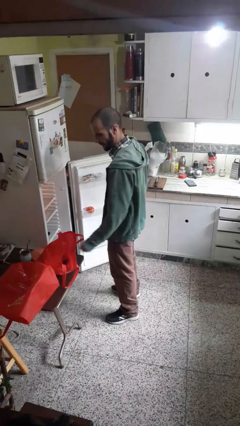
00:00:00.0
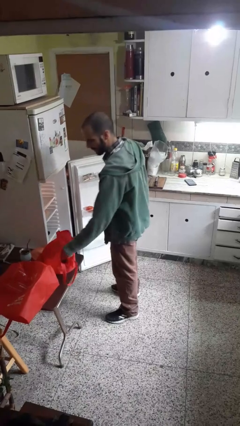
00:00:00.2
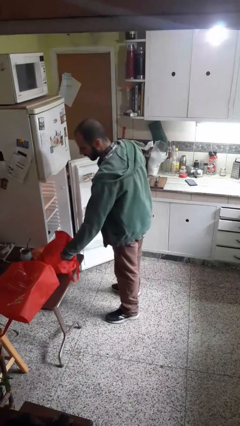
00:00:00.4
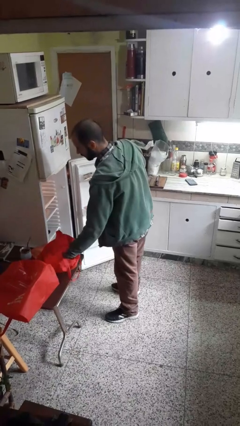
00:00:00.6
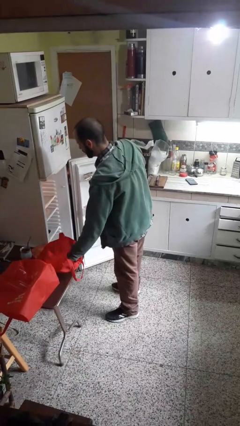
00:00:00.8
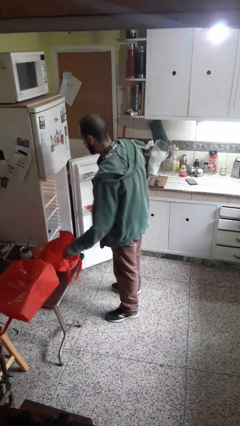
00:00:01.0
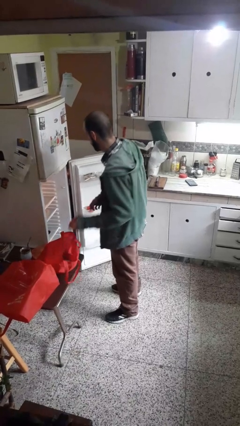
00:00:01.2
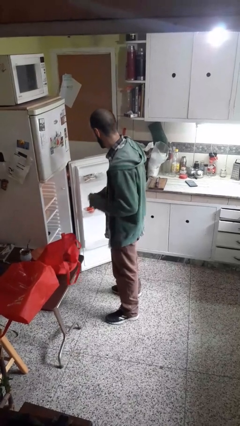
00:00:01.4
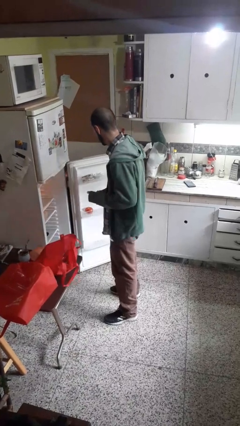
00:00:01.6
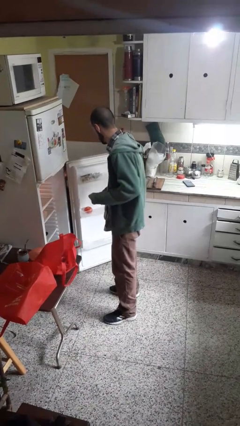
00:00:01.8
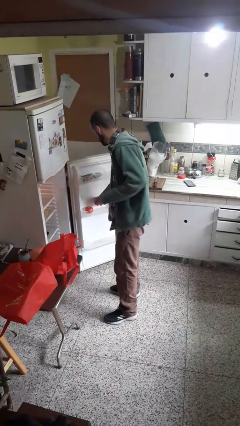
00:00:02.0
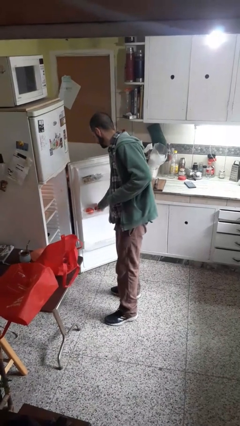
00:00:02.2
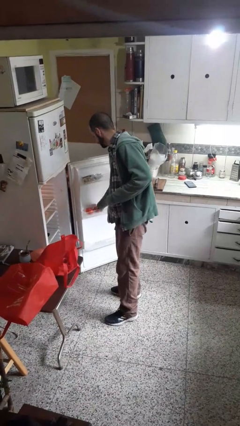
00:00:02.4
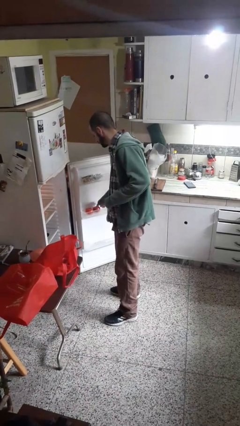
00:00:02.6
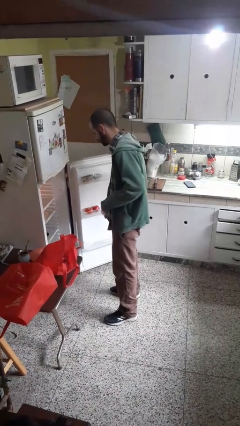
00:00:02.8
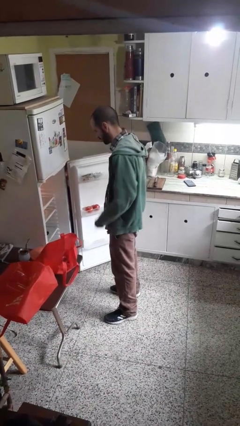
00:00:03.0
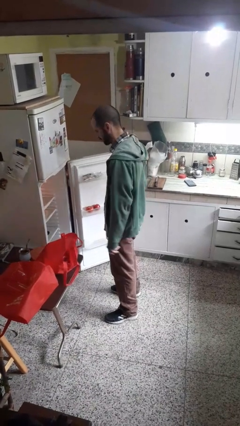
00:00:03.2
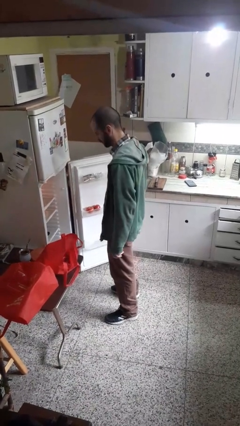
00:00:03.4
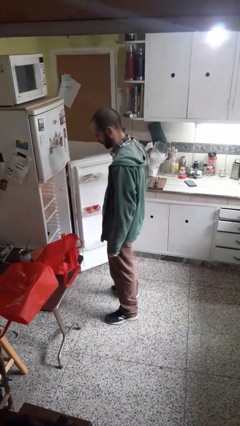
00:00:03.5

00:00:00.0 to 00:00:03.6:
person loads groceries into refrigerator

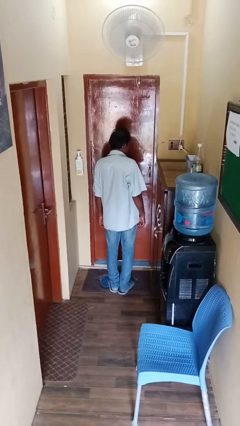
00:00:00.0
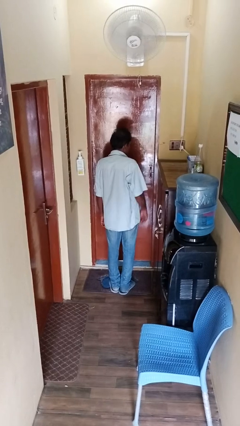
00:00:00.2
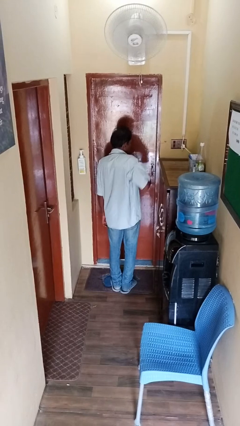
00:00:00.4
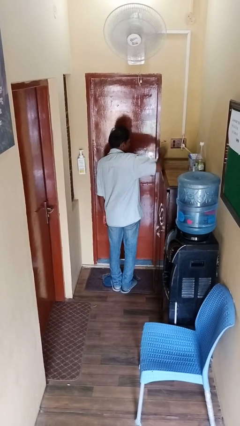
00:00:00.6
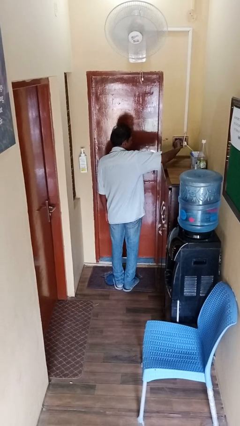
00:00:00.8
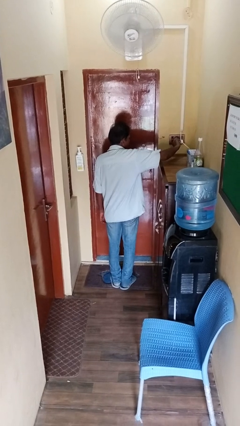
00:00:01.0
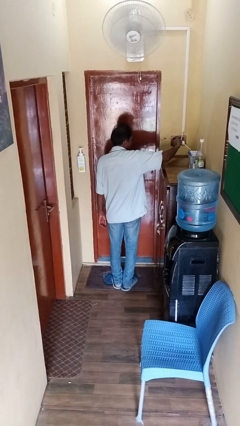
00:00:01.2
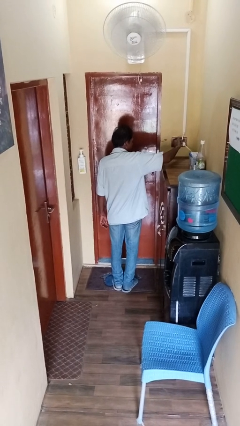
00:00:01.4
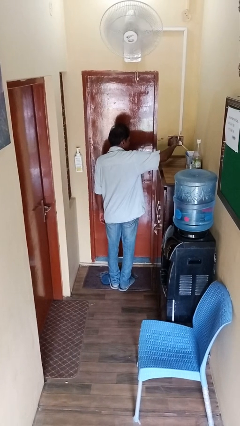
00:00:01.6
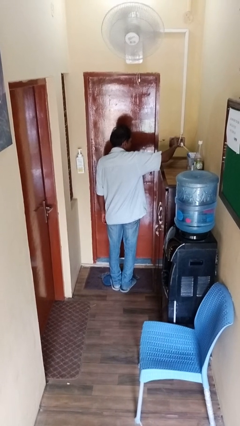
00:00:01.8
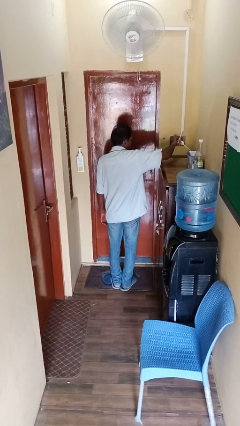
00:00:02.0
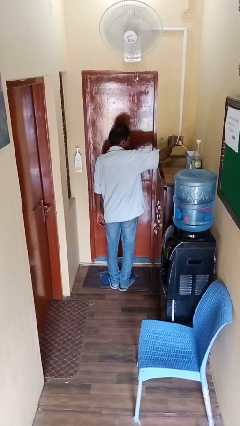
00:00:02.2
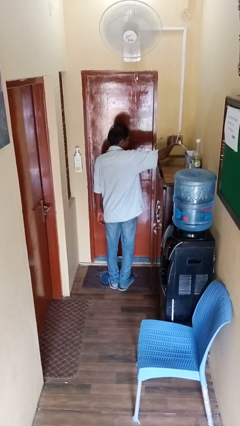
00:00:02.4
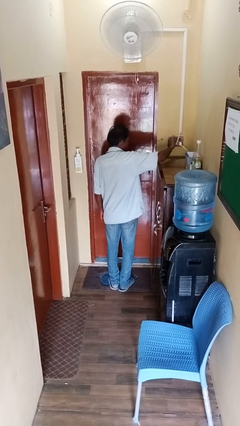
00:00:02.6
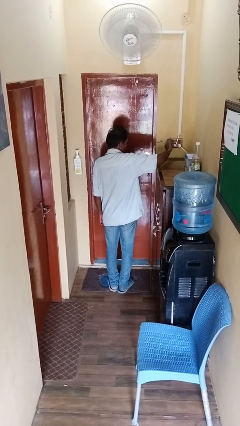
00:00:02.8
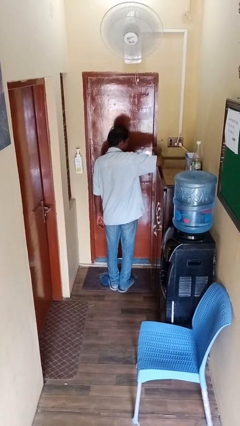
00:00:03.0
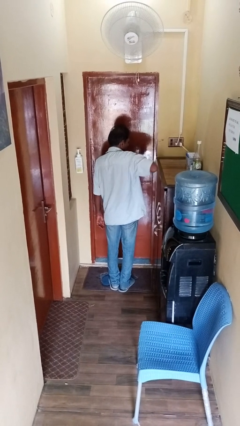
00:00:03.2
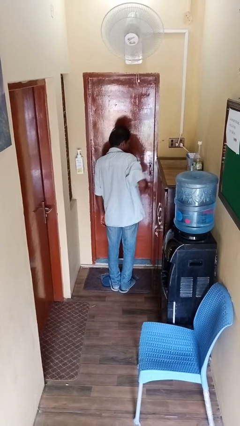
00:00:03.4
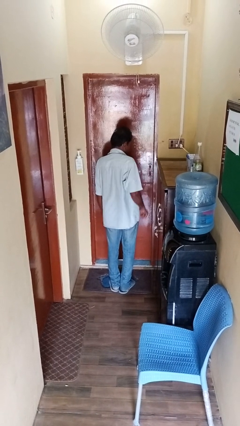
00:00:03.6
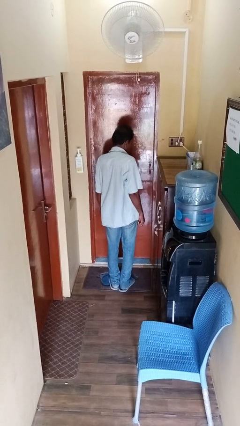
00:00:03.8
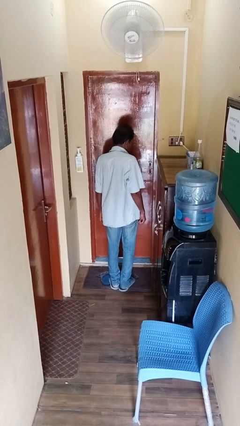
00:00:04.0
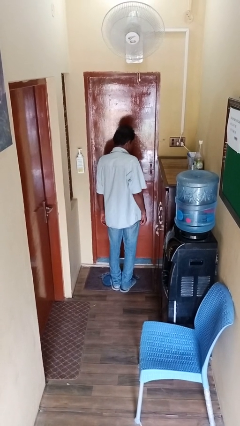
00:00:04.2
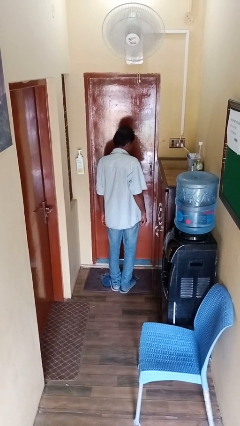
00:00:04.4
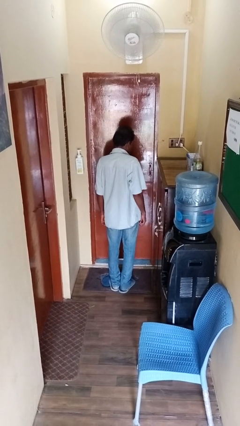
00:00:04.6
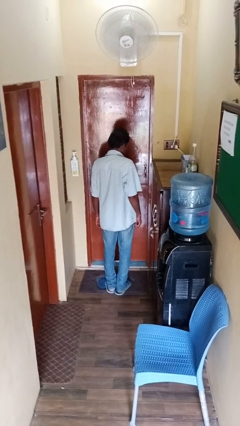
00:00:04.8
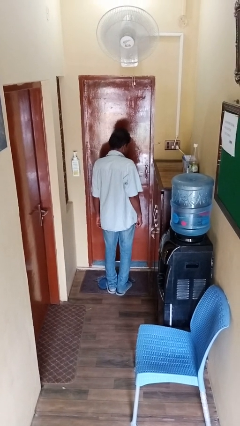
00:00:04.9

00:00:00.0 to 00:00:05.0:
person turns on fan

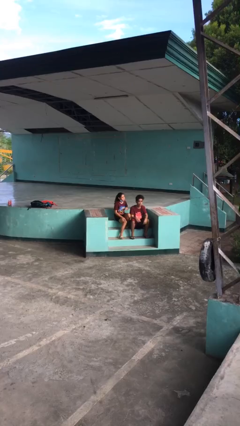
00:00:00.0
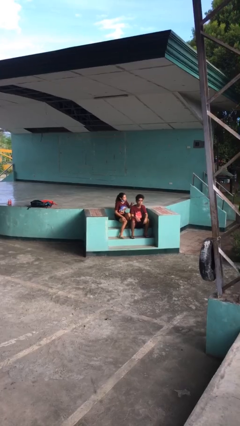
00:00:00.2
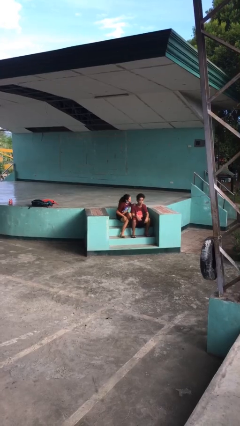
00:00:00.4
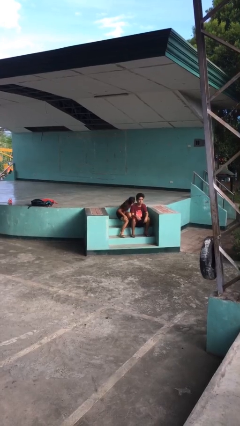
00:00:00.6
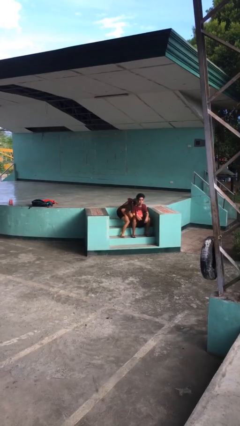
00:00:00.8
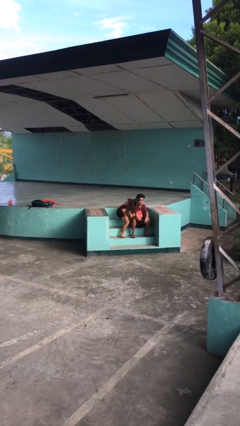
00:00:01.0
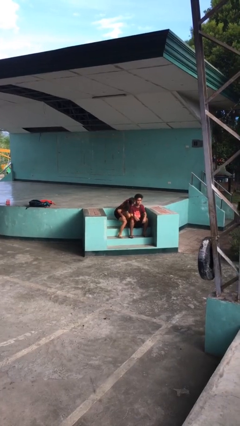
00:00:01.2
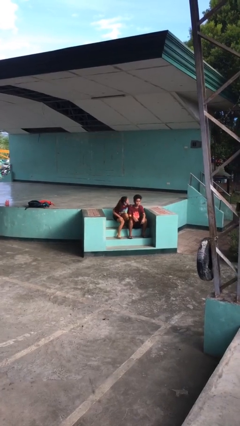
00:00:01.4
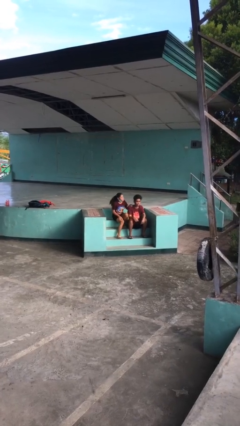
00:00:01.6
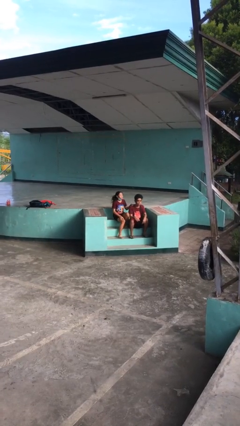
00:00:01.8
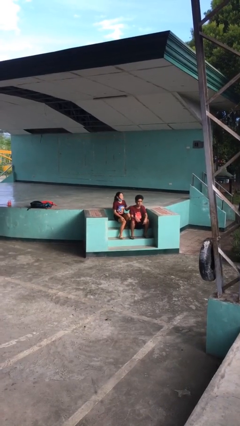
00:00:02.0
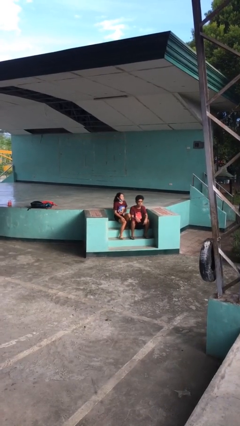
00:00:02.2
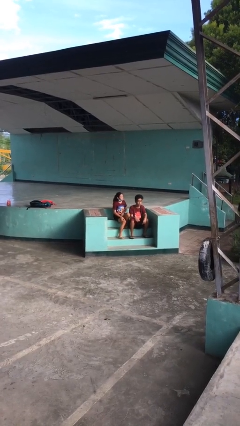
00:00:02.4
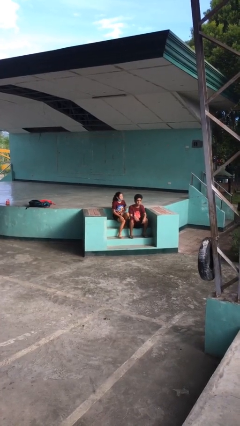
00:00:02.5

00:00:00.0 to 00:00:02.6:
person kisses cheek of person

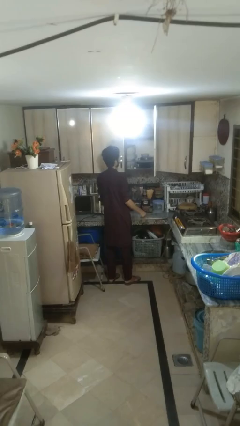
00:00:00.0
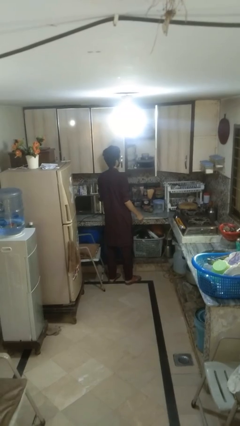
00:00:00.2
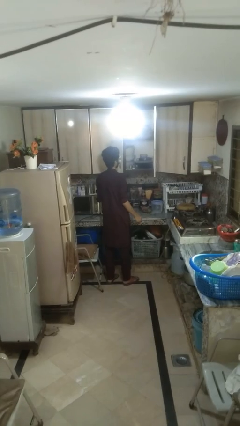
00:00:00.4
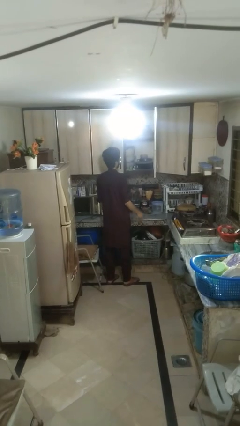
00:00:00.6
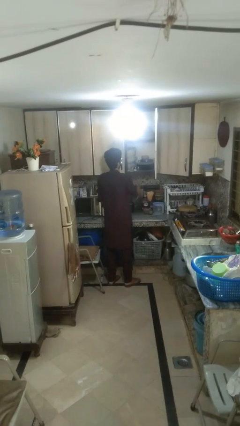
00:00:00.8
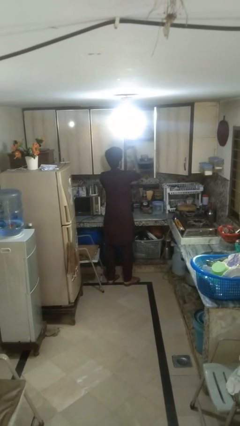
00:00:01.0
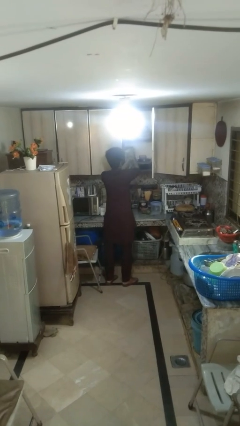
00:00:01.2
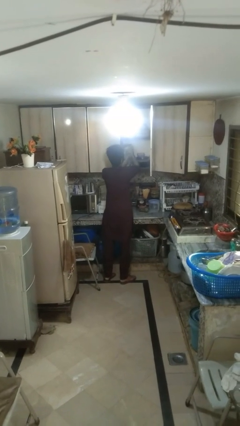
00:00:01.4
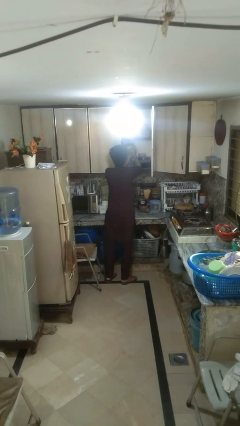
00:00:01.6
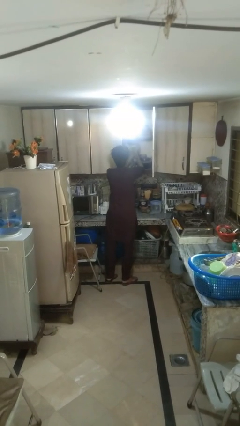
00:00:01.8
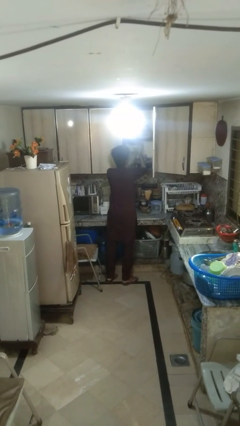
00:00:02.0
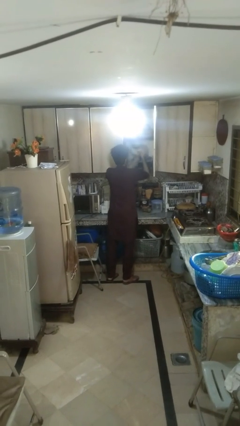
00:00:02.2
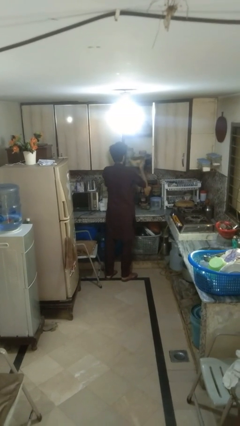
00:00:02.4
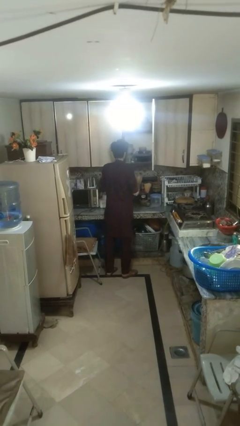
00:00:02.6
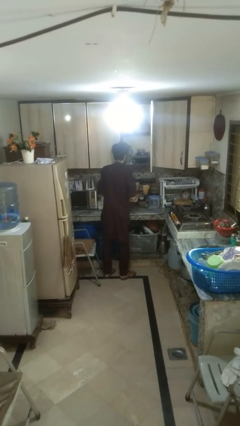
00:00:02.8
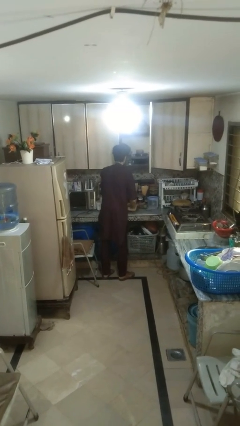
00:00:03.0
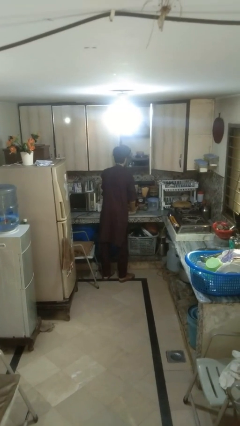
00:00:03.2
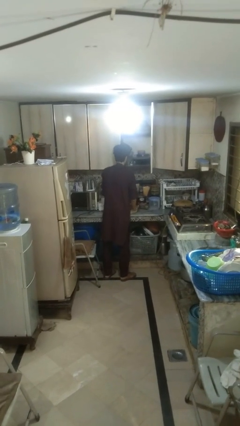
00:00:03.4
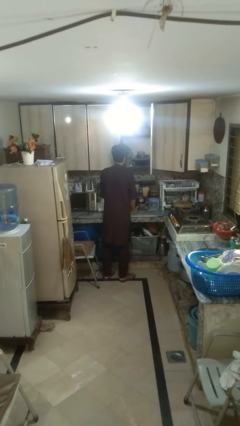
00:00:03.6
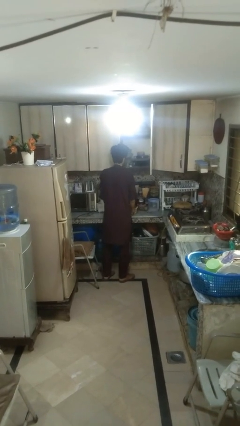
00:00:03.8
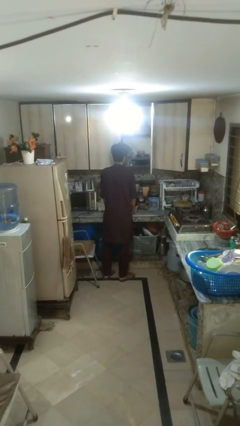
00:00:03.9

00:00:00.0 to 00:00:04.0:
person takes object from cabinet

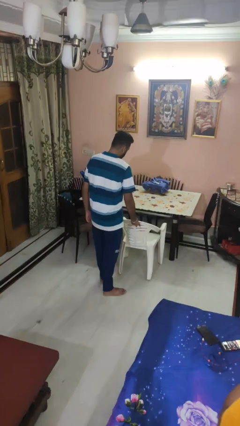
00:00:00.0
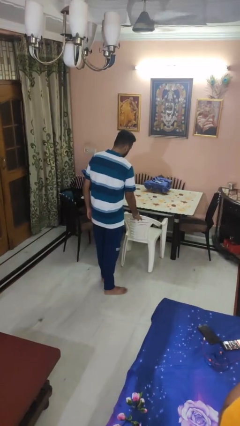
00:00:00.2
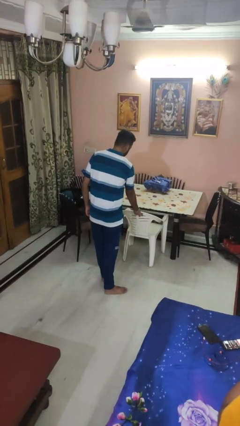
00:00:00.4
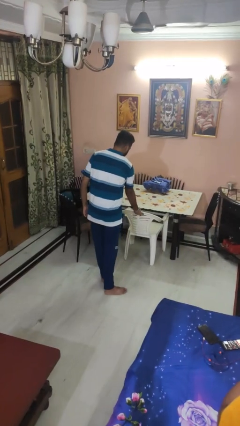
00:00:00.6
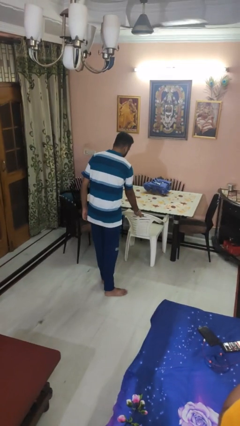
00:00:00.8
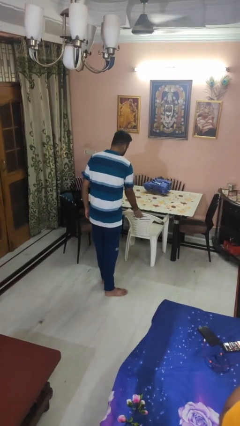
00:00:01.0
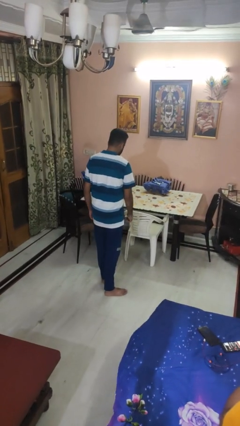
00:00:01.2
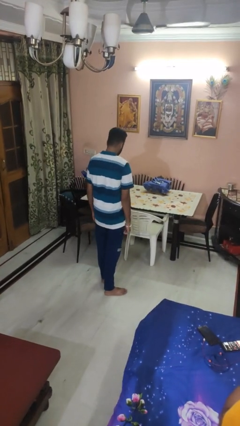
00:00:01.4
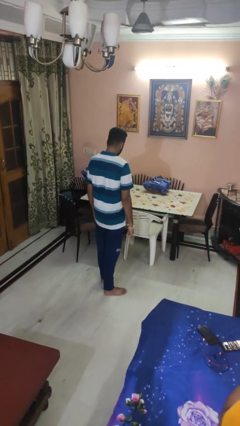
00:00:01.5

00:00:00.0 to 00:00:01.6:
person pushes in chair

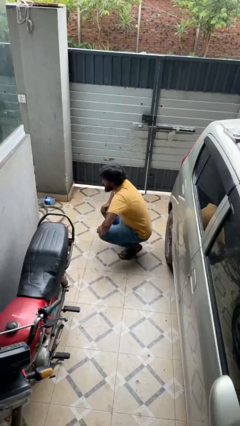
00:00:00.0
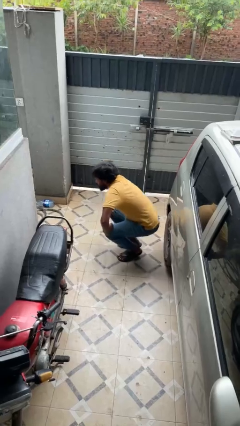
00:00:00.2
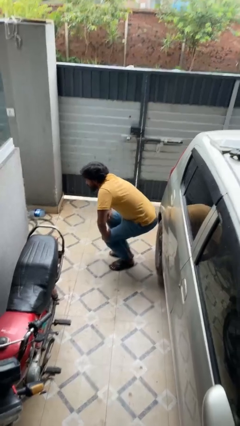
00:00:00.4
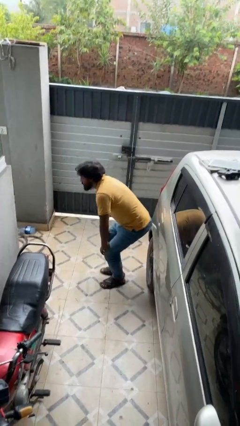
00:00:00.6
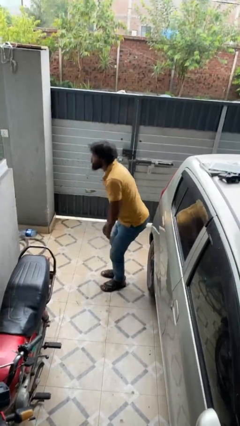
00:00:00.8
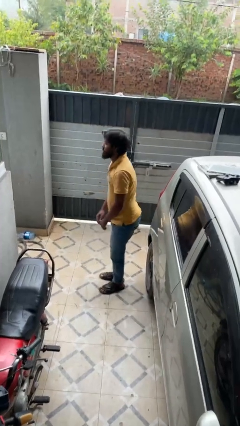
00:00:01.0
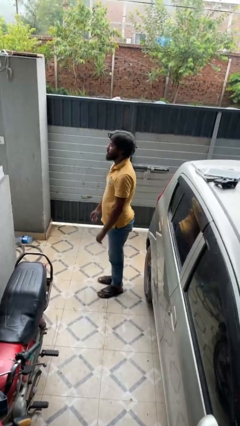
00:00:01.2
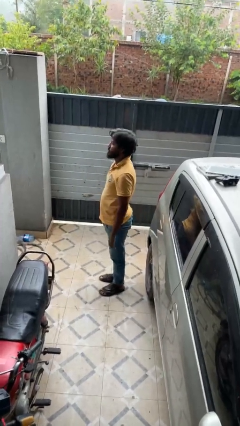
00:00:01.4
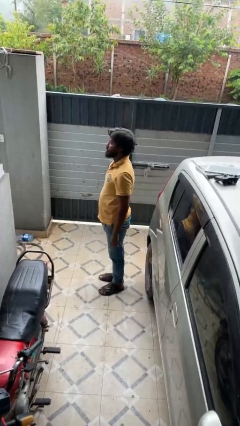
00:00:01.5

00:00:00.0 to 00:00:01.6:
person stands up
